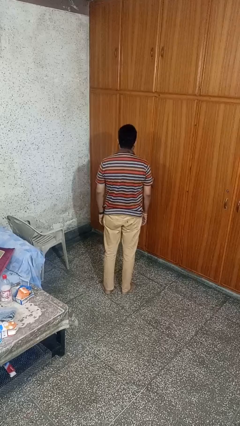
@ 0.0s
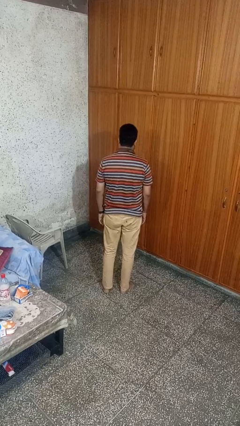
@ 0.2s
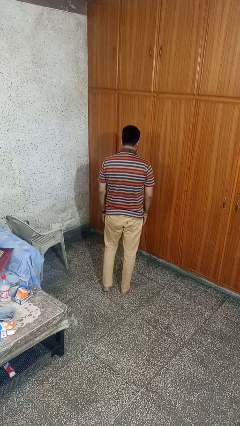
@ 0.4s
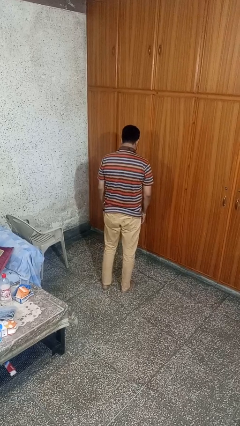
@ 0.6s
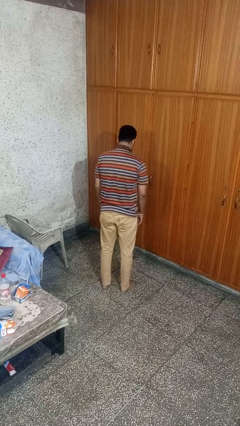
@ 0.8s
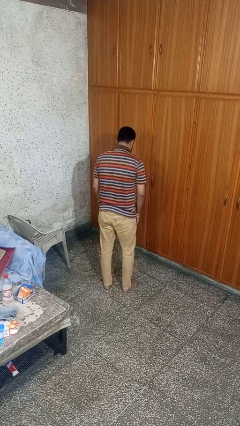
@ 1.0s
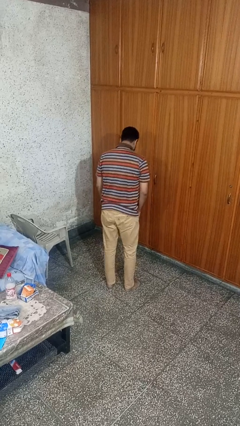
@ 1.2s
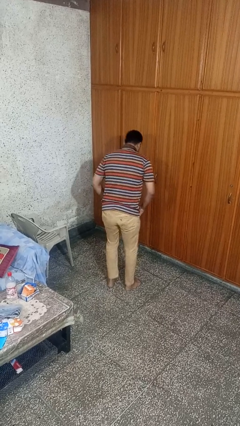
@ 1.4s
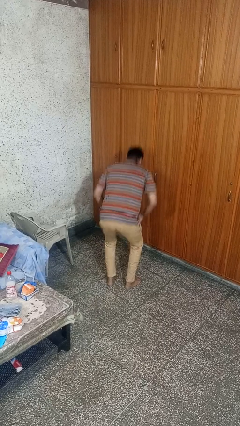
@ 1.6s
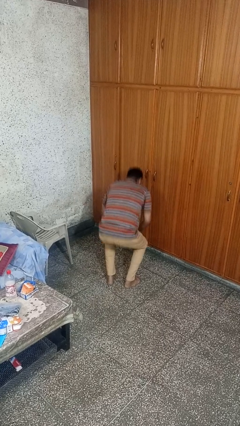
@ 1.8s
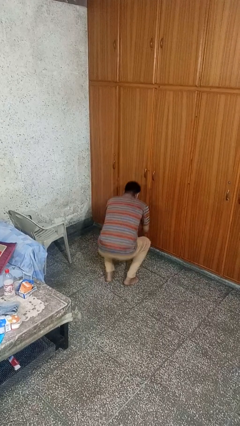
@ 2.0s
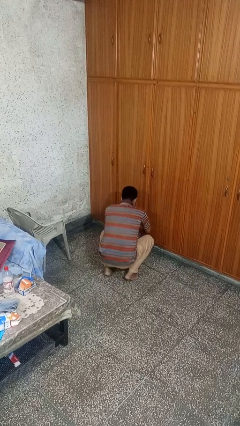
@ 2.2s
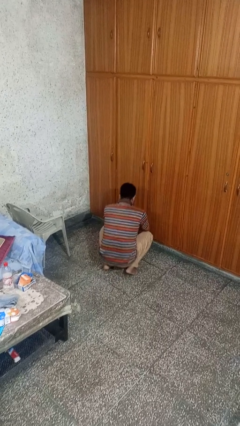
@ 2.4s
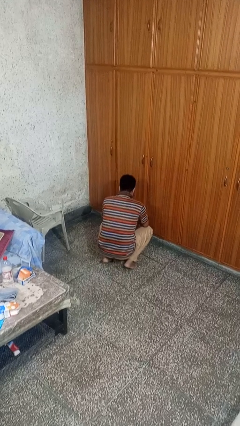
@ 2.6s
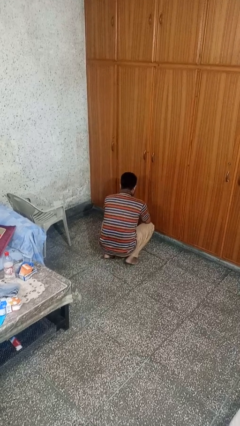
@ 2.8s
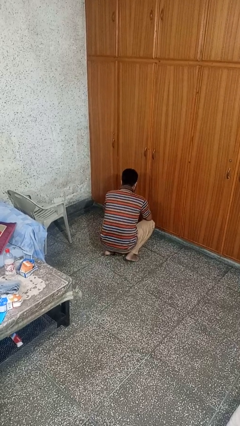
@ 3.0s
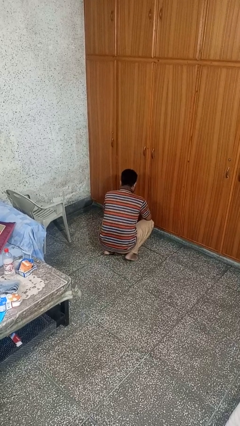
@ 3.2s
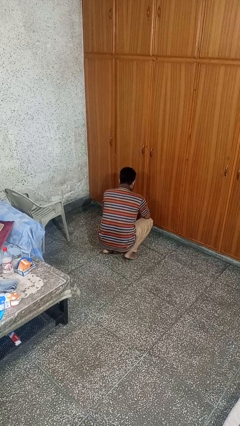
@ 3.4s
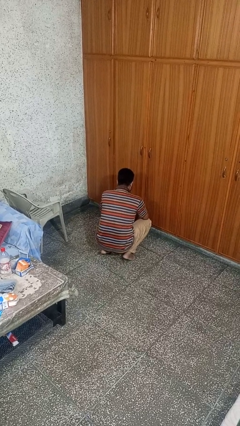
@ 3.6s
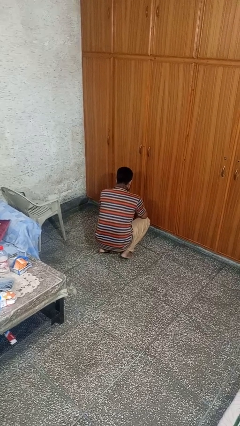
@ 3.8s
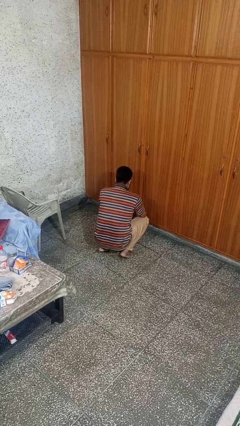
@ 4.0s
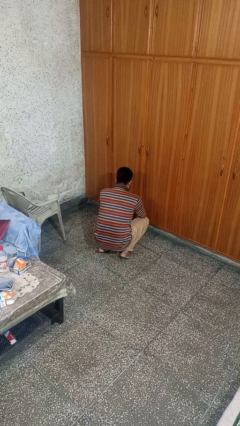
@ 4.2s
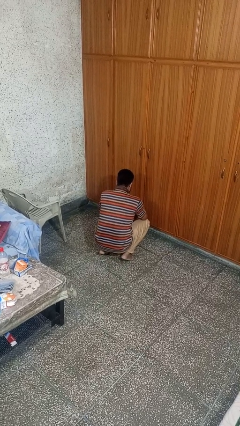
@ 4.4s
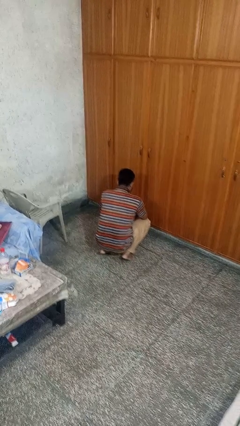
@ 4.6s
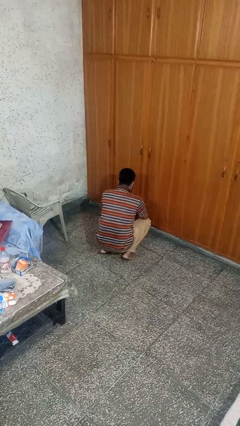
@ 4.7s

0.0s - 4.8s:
person squats

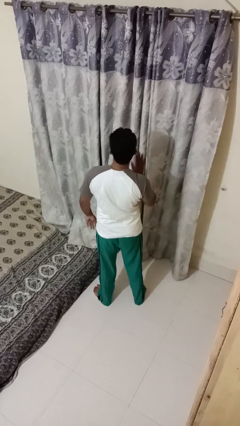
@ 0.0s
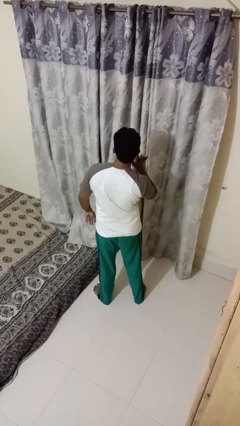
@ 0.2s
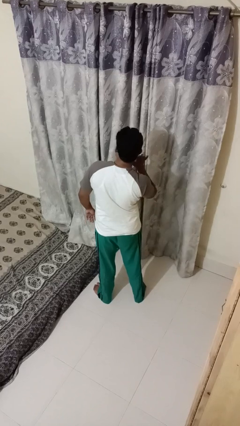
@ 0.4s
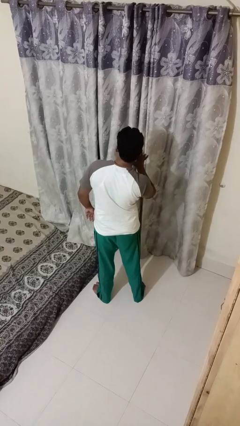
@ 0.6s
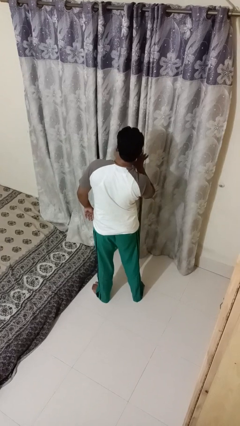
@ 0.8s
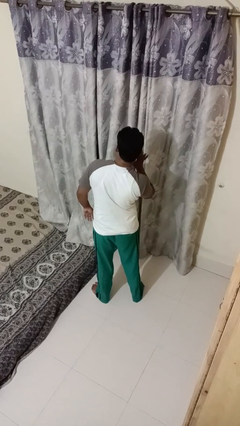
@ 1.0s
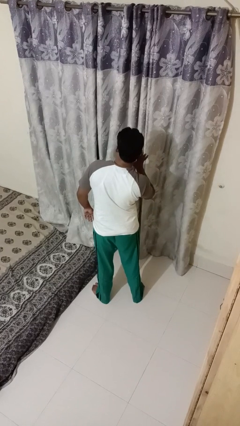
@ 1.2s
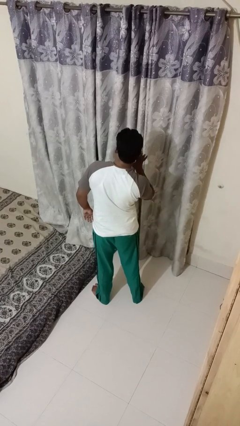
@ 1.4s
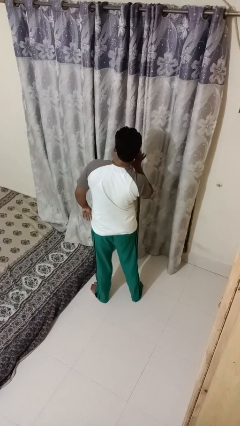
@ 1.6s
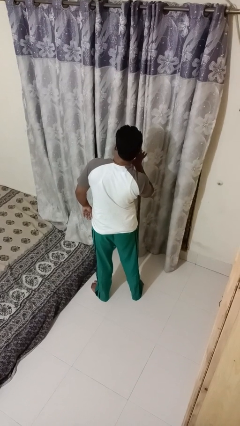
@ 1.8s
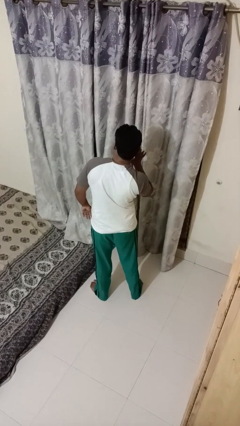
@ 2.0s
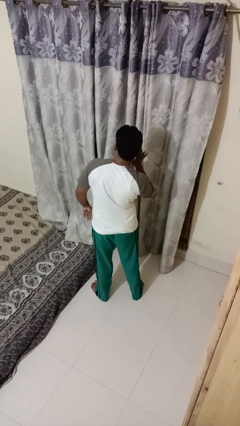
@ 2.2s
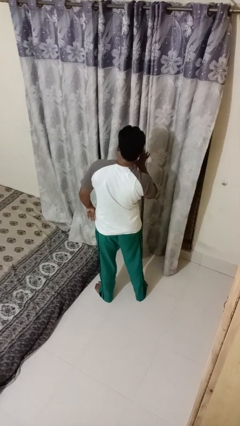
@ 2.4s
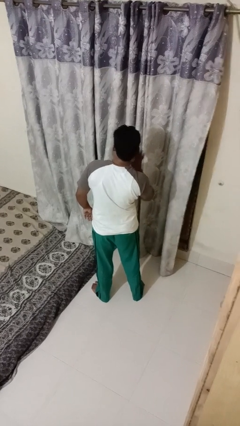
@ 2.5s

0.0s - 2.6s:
person gestures listen closely

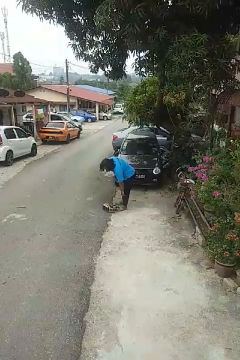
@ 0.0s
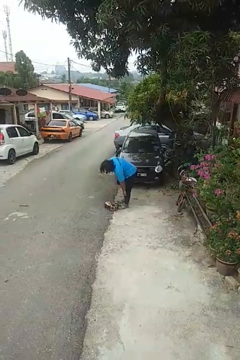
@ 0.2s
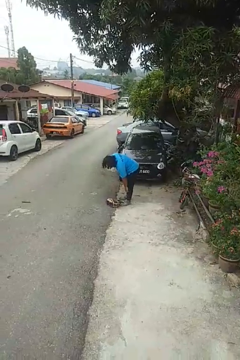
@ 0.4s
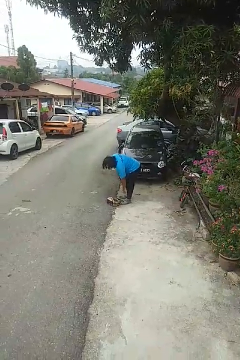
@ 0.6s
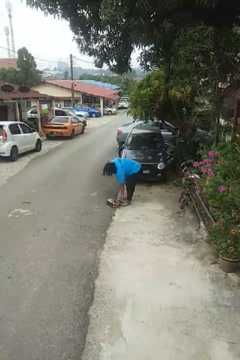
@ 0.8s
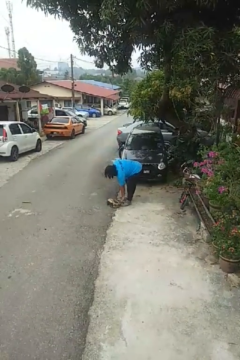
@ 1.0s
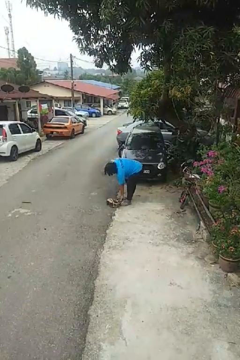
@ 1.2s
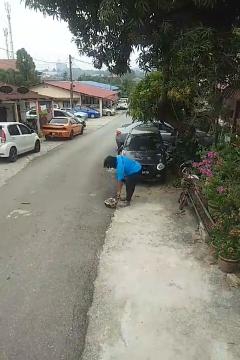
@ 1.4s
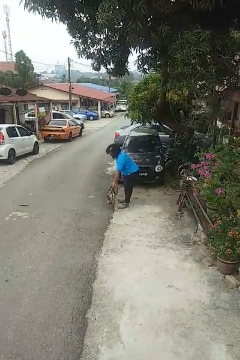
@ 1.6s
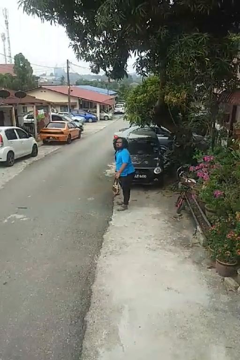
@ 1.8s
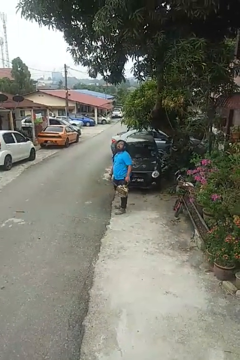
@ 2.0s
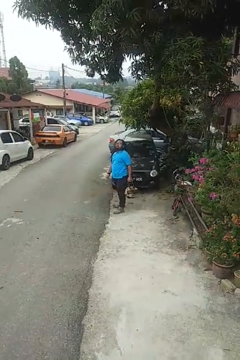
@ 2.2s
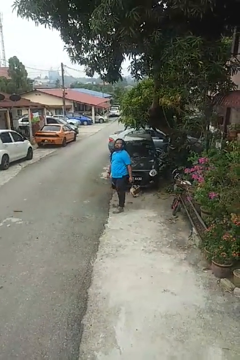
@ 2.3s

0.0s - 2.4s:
person picks up object from floor

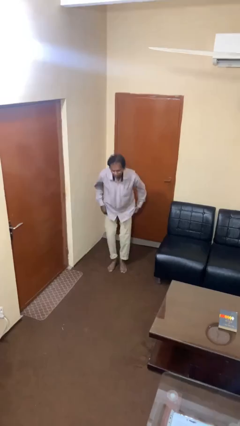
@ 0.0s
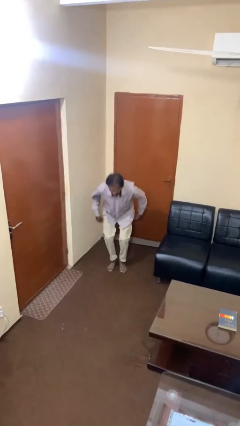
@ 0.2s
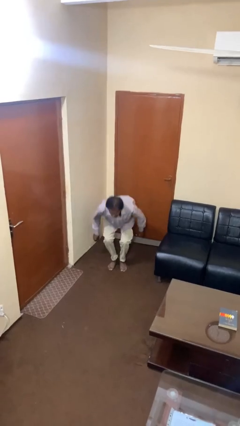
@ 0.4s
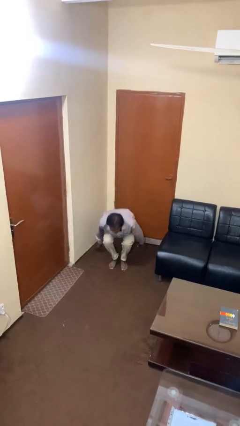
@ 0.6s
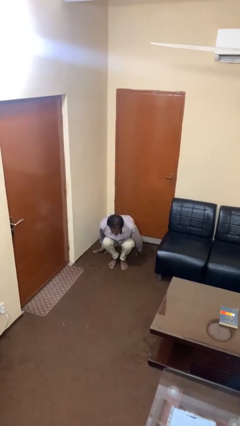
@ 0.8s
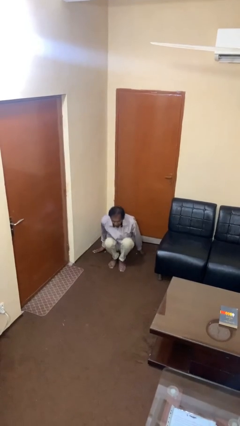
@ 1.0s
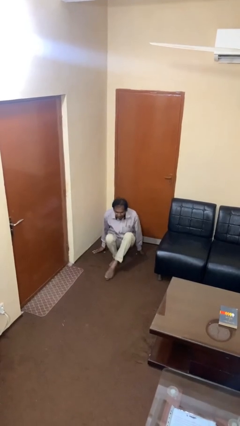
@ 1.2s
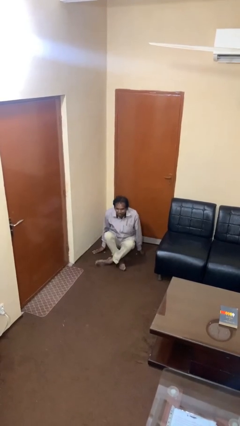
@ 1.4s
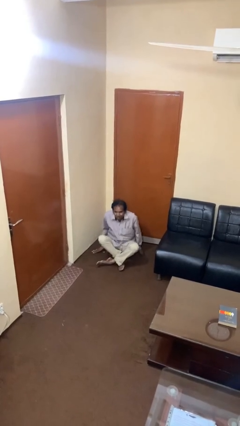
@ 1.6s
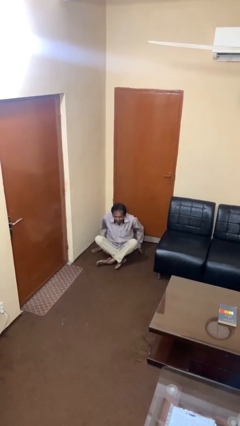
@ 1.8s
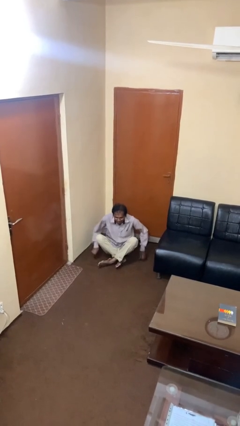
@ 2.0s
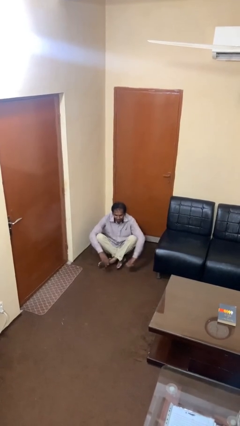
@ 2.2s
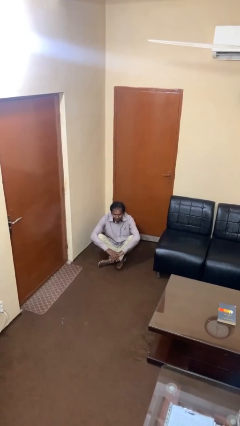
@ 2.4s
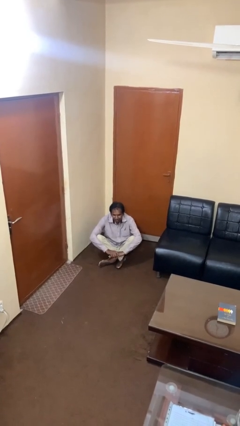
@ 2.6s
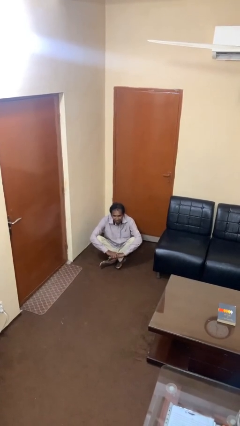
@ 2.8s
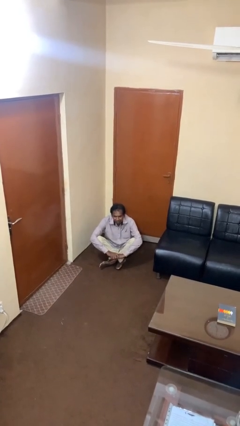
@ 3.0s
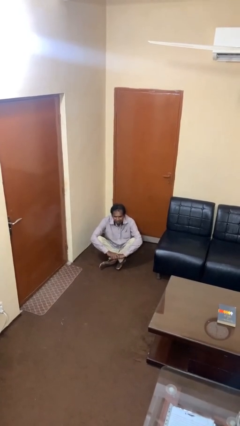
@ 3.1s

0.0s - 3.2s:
person sits crisscross

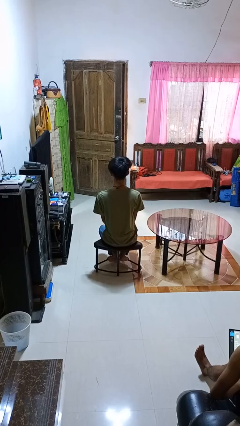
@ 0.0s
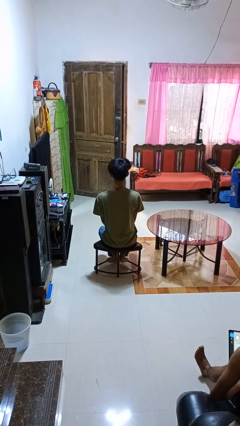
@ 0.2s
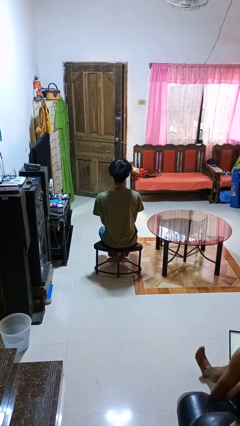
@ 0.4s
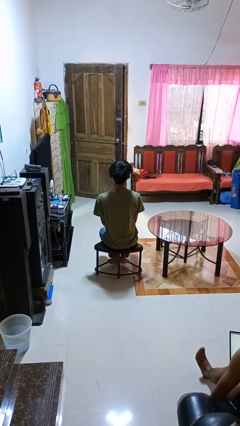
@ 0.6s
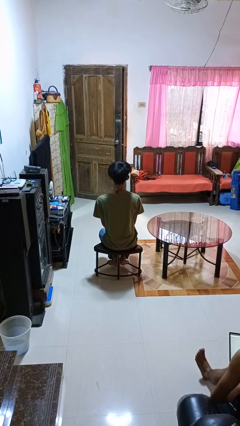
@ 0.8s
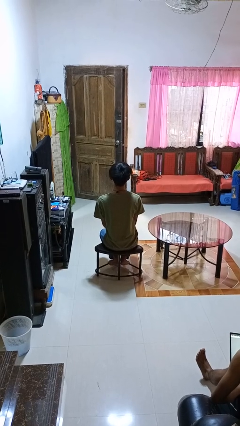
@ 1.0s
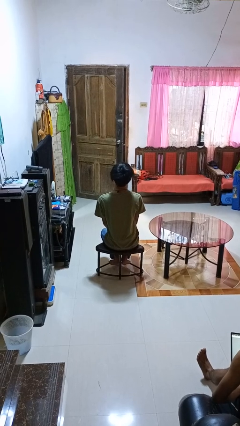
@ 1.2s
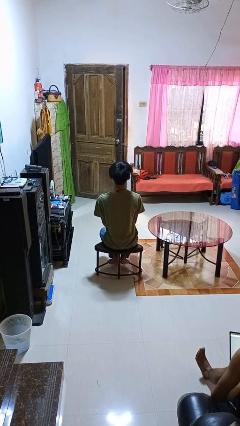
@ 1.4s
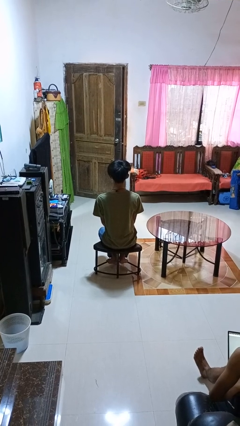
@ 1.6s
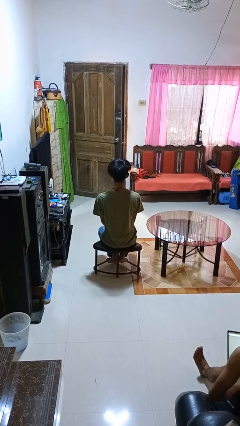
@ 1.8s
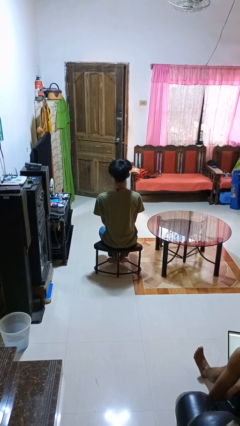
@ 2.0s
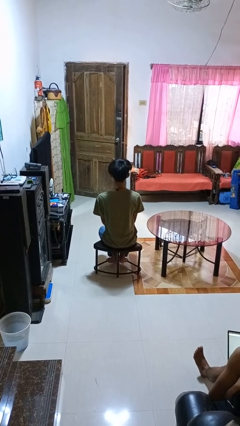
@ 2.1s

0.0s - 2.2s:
person nods head

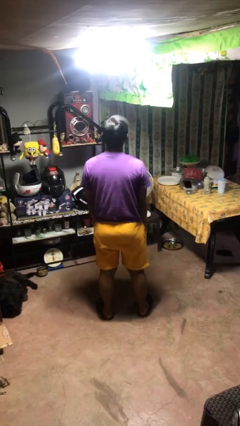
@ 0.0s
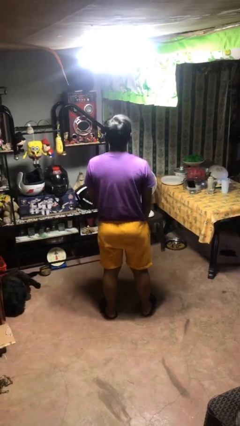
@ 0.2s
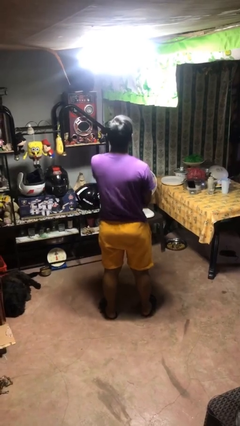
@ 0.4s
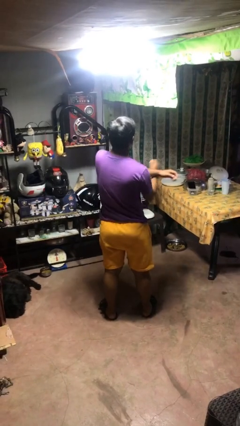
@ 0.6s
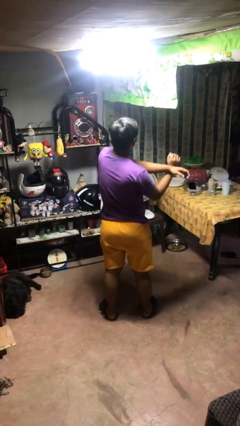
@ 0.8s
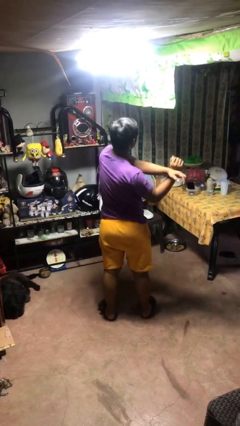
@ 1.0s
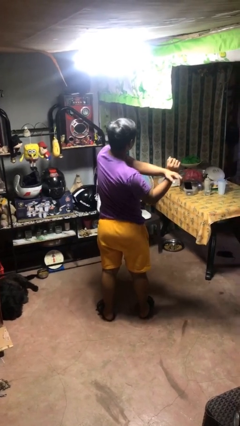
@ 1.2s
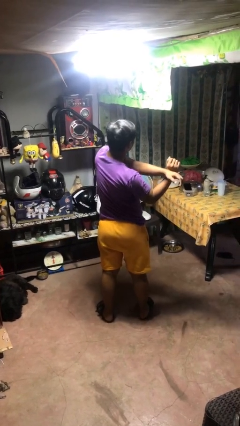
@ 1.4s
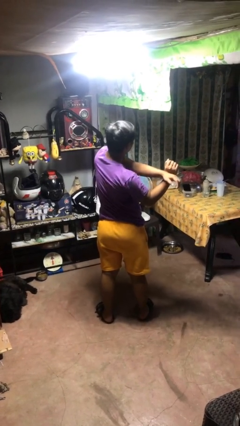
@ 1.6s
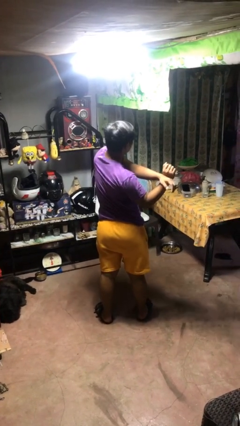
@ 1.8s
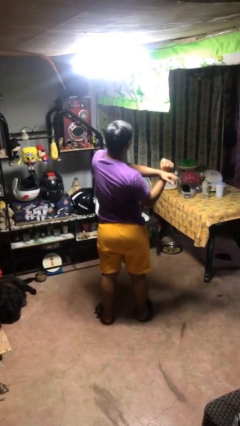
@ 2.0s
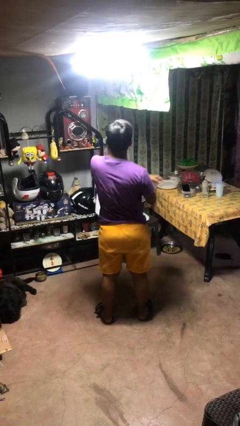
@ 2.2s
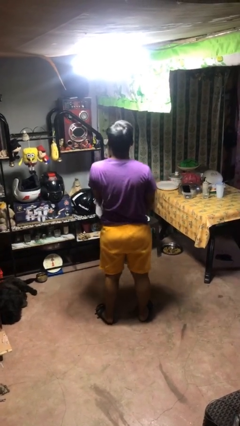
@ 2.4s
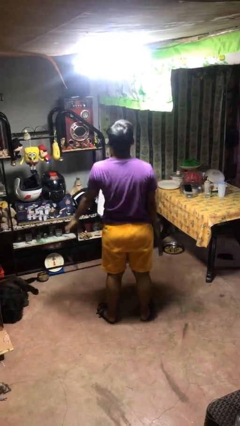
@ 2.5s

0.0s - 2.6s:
person crosses arms
